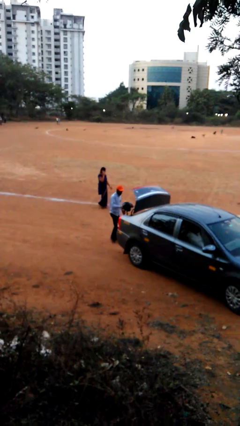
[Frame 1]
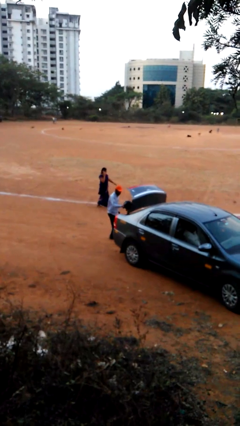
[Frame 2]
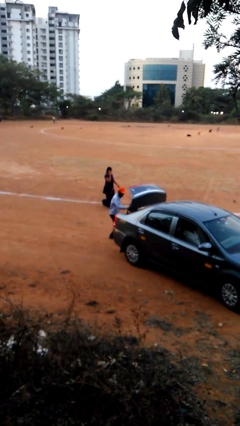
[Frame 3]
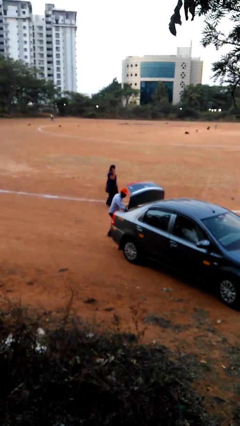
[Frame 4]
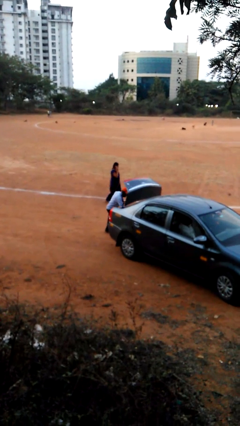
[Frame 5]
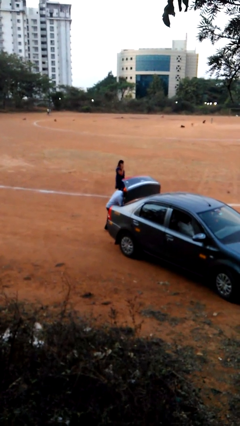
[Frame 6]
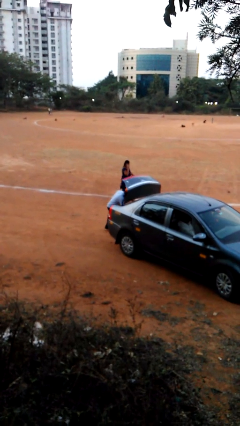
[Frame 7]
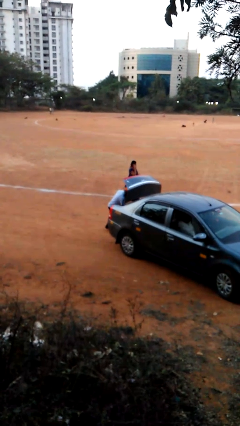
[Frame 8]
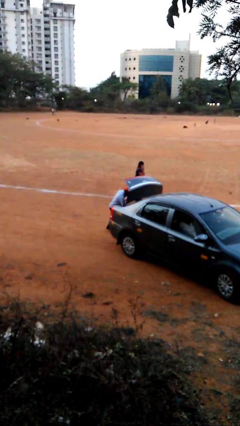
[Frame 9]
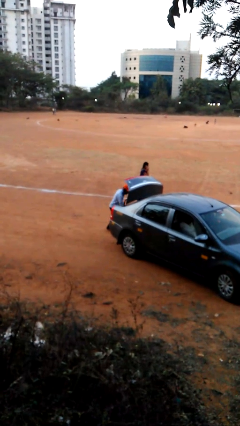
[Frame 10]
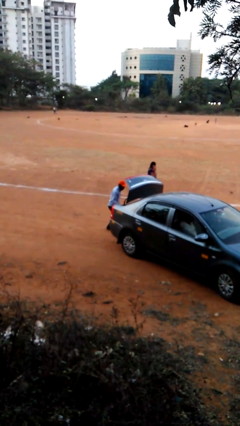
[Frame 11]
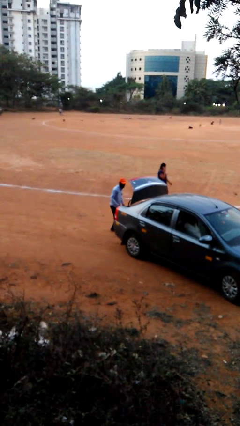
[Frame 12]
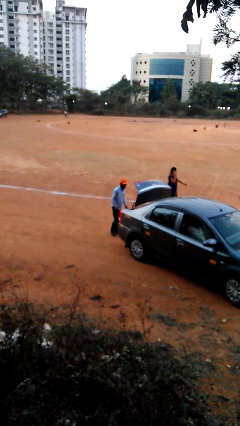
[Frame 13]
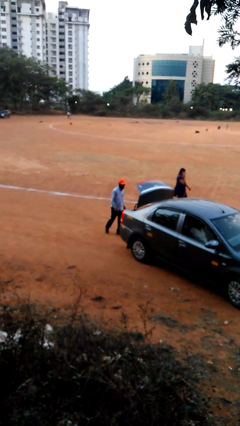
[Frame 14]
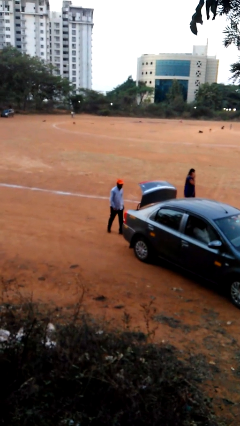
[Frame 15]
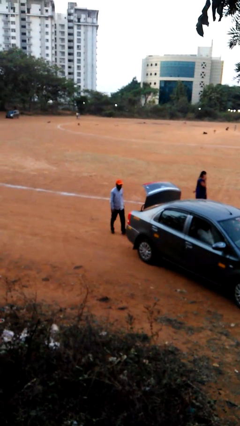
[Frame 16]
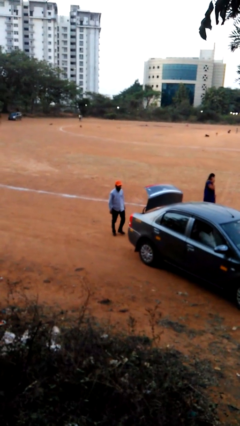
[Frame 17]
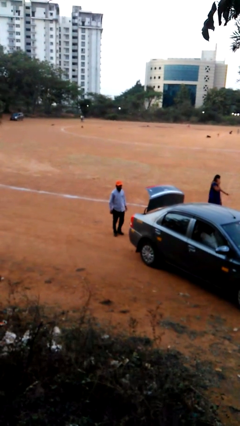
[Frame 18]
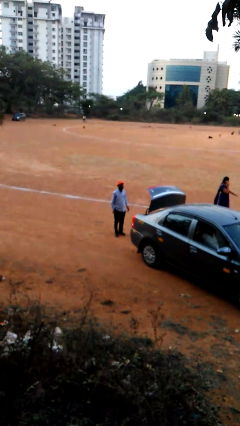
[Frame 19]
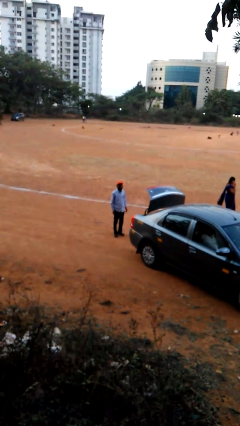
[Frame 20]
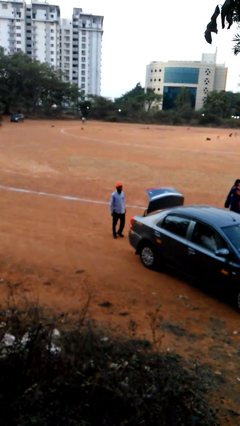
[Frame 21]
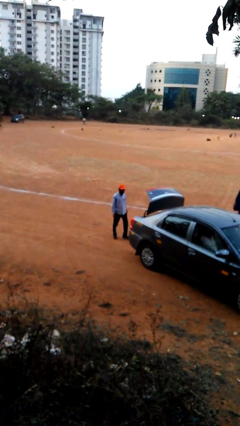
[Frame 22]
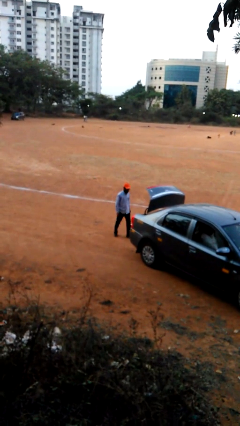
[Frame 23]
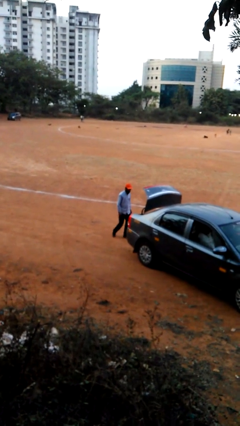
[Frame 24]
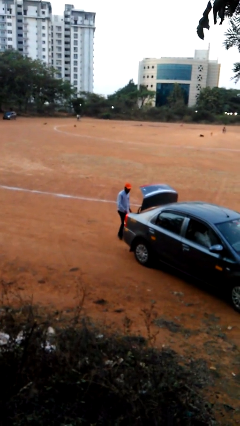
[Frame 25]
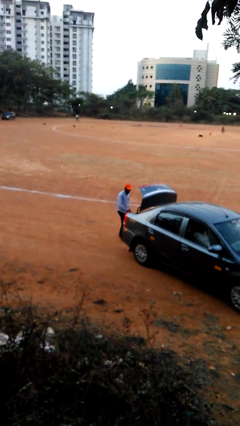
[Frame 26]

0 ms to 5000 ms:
person loads car

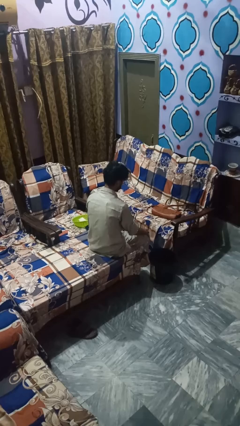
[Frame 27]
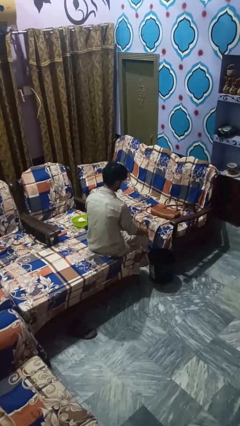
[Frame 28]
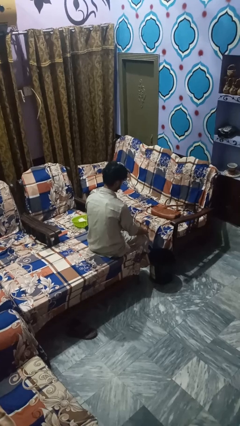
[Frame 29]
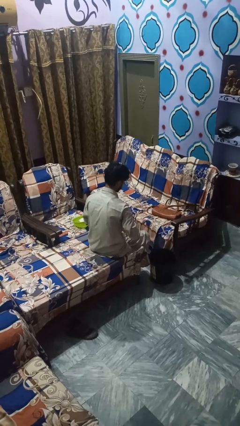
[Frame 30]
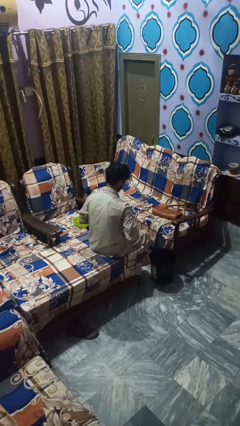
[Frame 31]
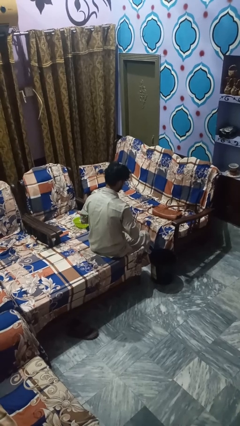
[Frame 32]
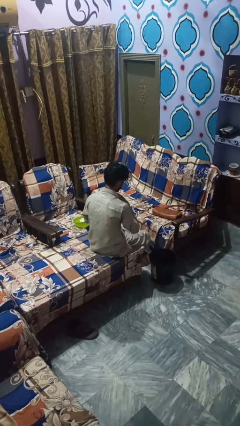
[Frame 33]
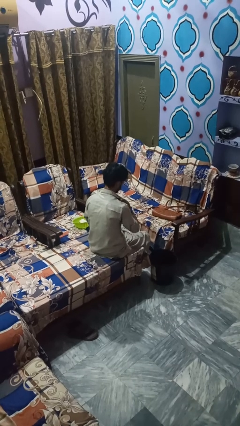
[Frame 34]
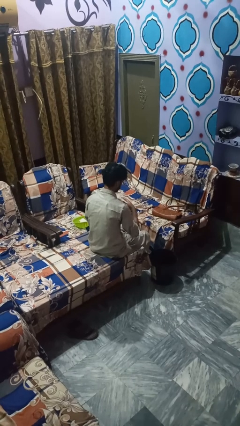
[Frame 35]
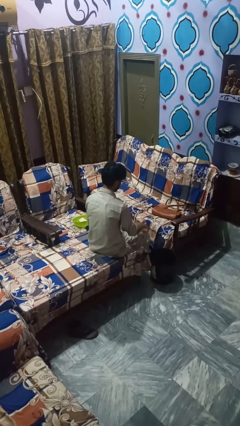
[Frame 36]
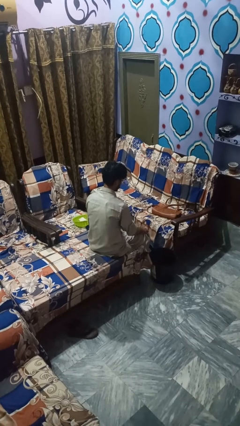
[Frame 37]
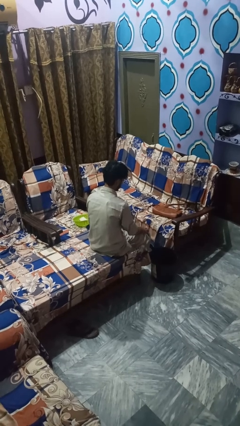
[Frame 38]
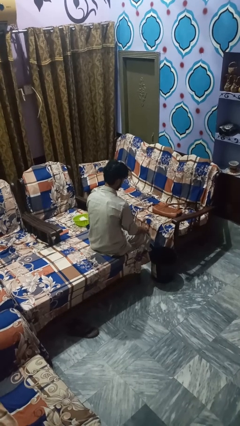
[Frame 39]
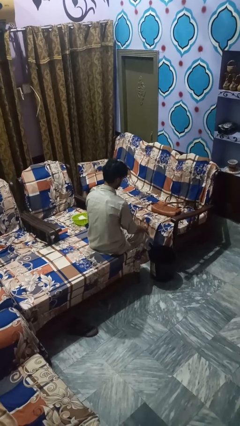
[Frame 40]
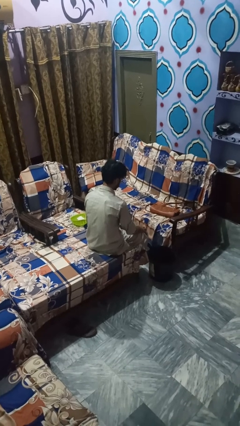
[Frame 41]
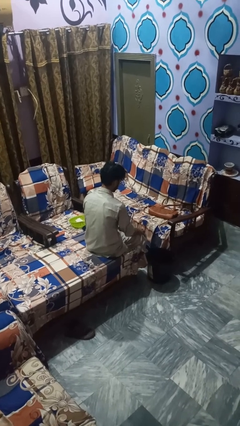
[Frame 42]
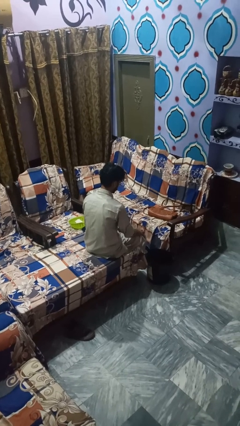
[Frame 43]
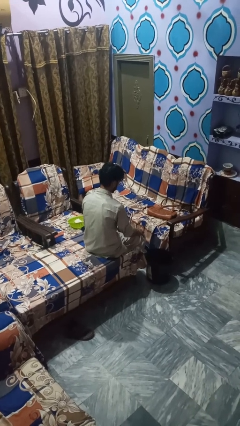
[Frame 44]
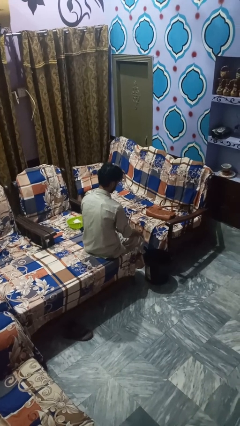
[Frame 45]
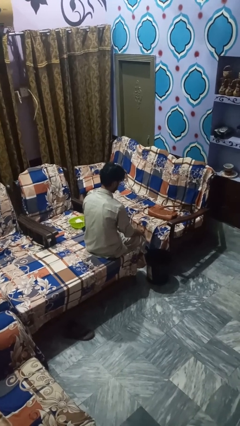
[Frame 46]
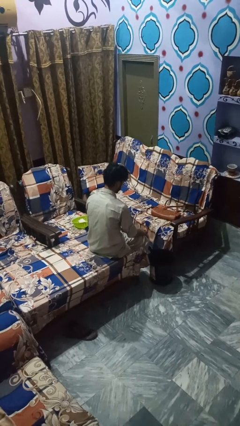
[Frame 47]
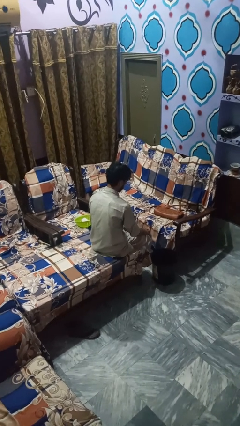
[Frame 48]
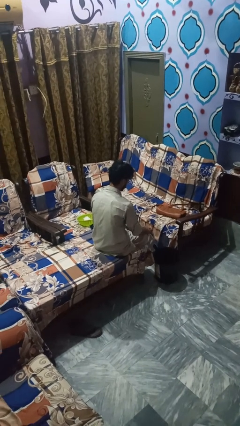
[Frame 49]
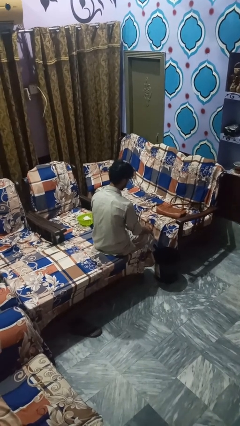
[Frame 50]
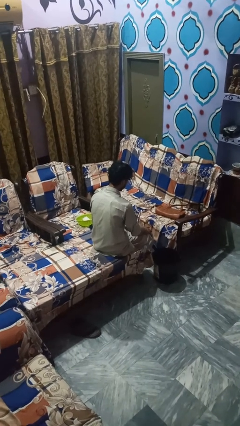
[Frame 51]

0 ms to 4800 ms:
person buttons shirt

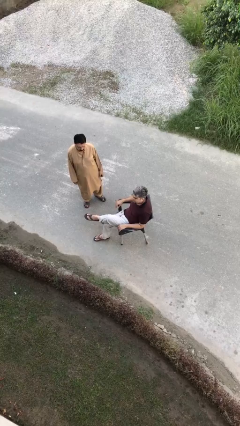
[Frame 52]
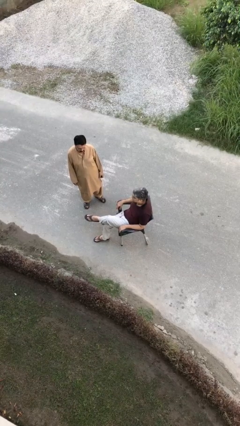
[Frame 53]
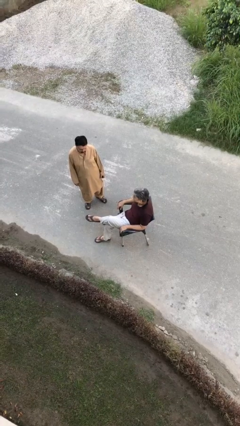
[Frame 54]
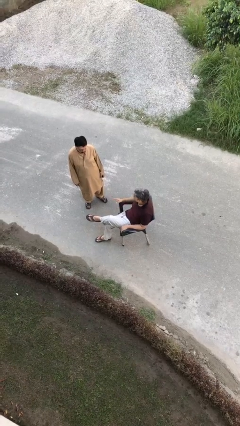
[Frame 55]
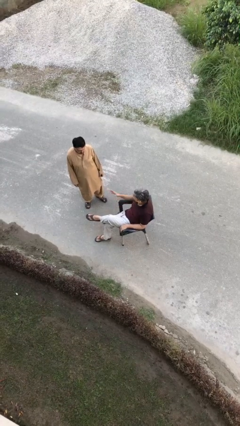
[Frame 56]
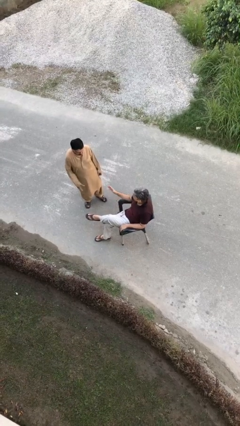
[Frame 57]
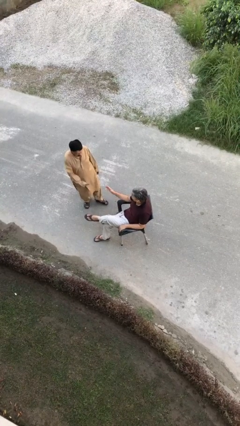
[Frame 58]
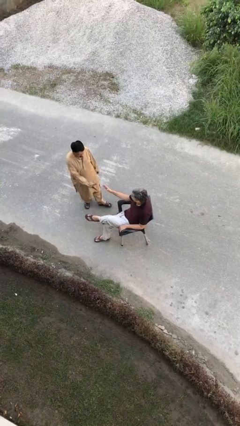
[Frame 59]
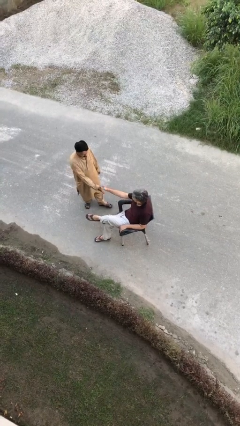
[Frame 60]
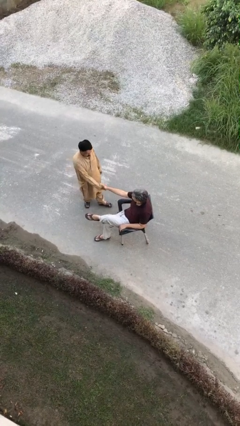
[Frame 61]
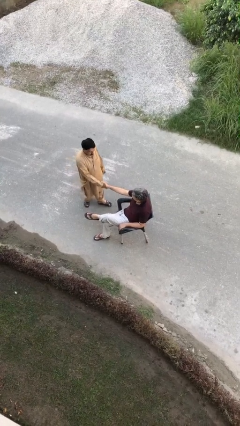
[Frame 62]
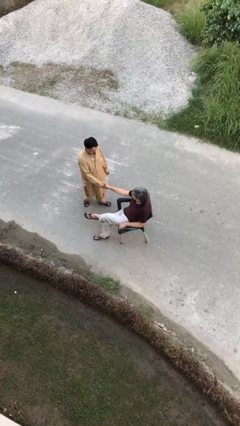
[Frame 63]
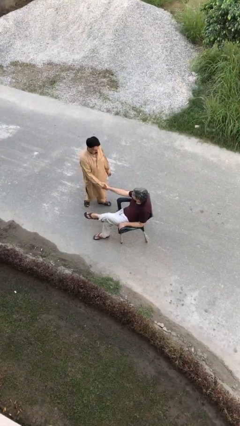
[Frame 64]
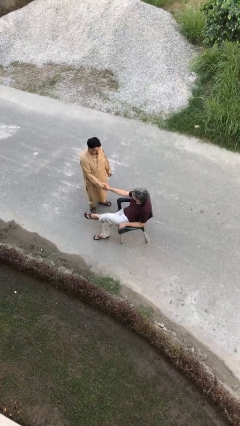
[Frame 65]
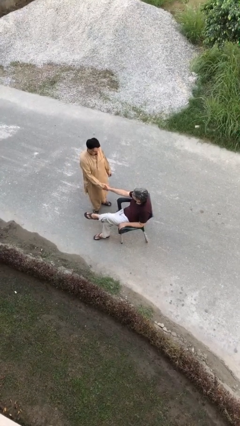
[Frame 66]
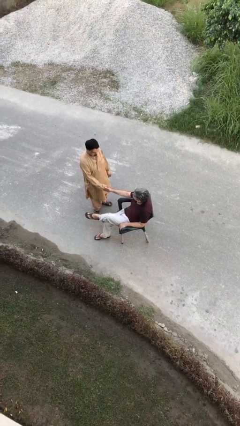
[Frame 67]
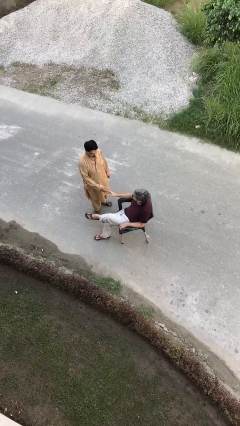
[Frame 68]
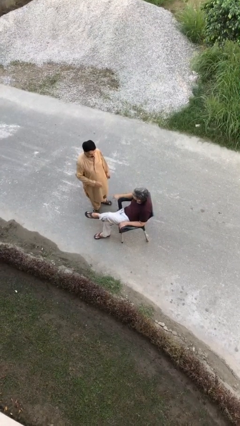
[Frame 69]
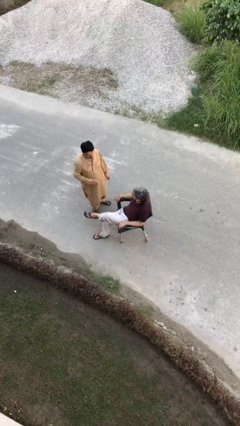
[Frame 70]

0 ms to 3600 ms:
person shakes hand

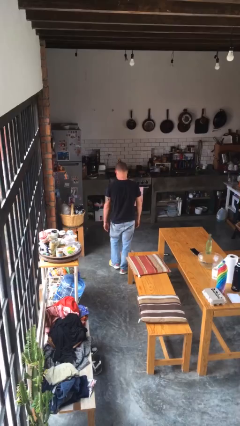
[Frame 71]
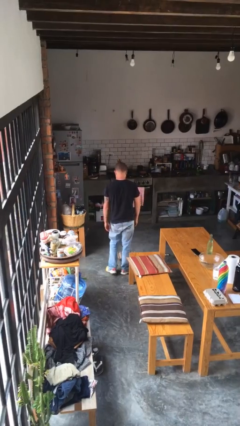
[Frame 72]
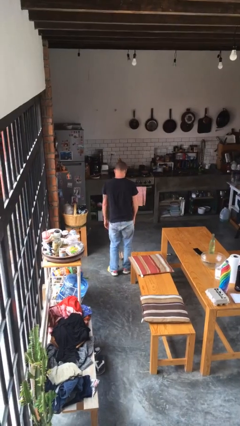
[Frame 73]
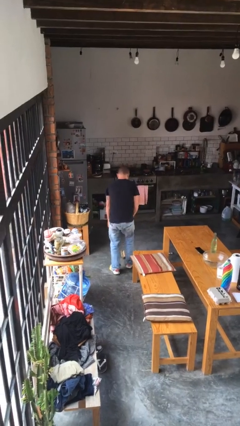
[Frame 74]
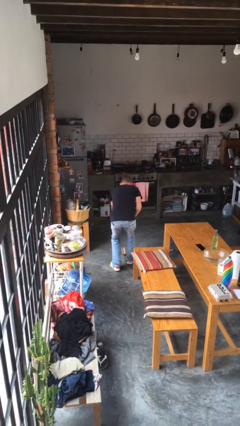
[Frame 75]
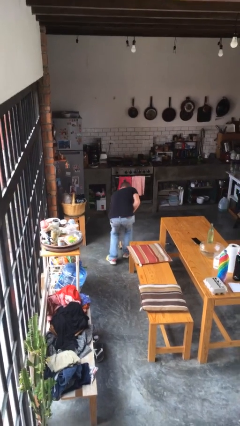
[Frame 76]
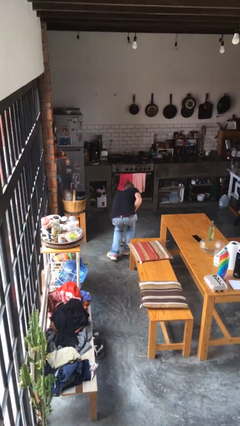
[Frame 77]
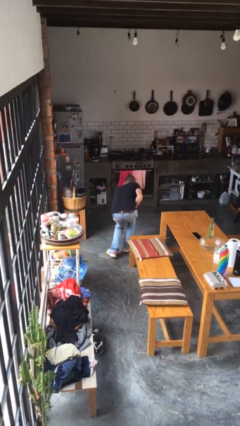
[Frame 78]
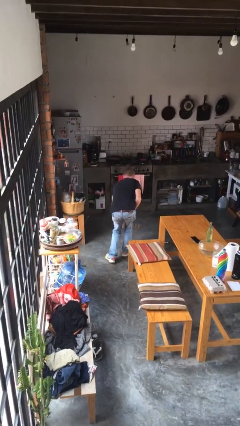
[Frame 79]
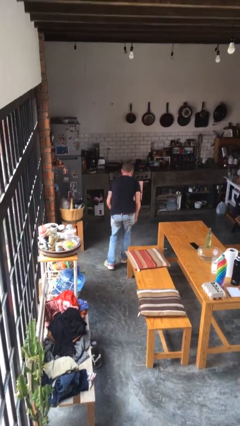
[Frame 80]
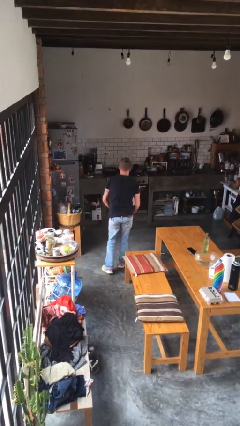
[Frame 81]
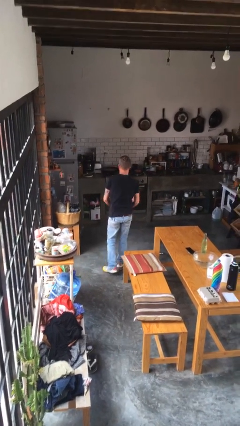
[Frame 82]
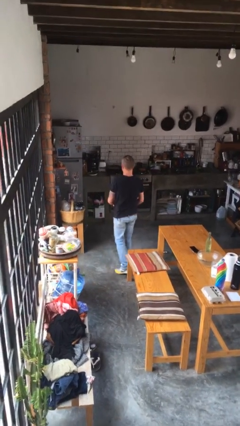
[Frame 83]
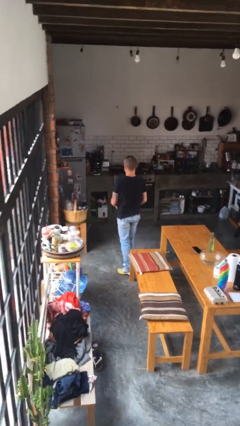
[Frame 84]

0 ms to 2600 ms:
person picks up object from floor

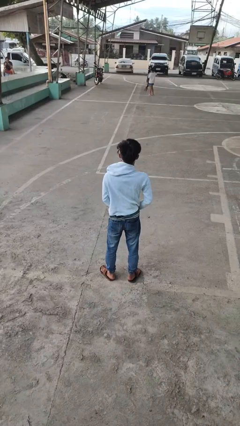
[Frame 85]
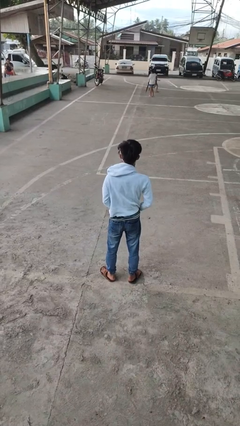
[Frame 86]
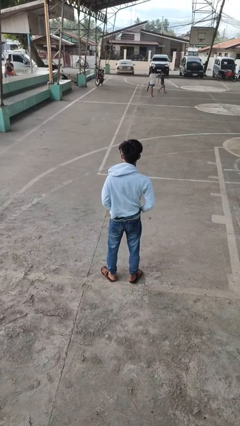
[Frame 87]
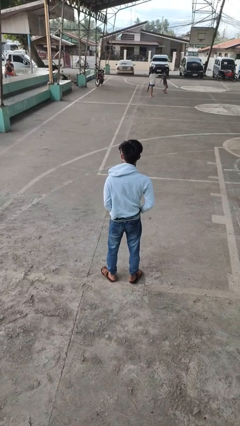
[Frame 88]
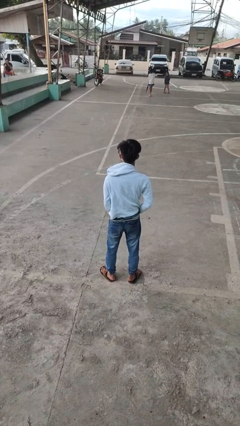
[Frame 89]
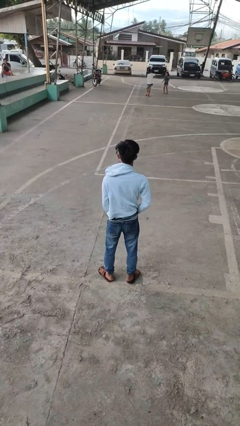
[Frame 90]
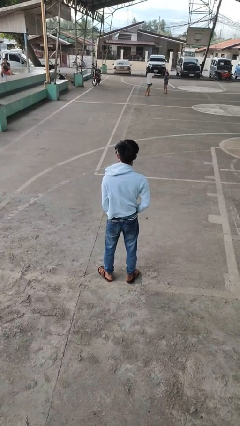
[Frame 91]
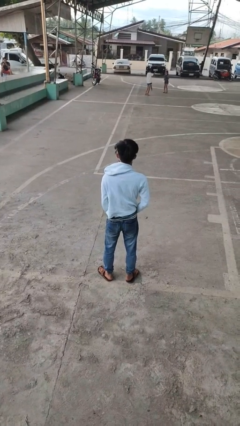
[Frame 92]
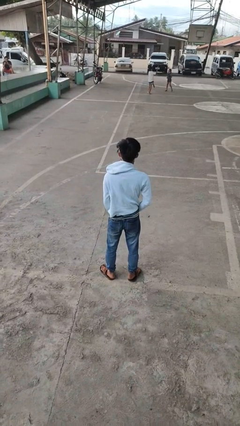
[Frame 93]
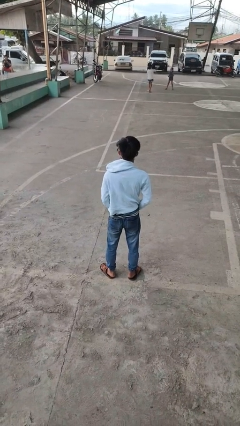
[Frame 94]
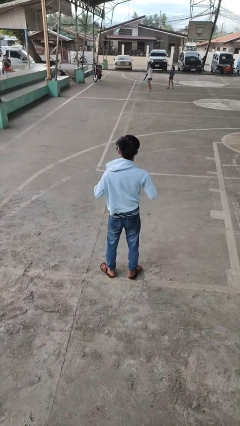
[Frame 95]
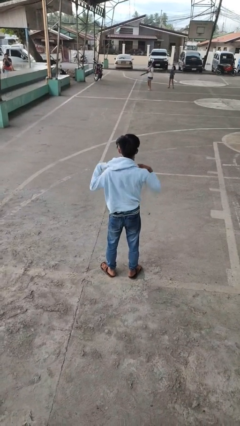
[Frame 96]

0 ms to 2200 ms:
person unzips jacket
